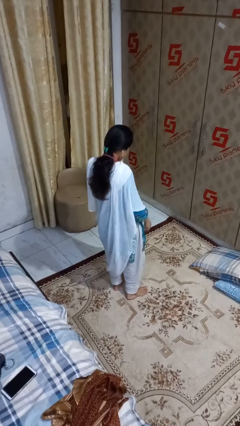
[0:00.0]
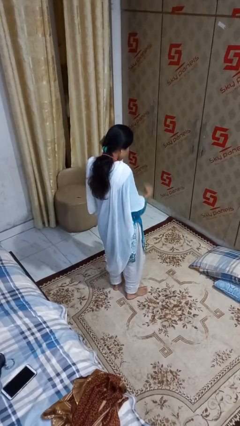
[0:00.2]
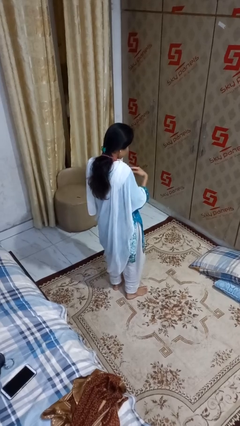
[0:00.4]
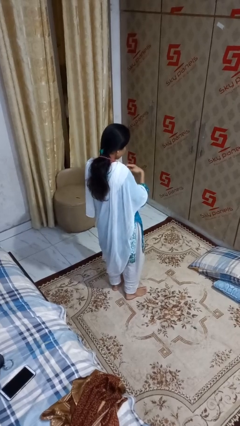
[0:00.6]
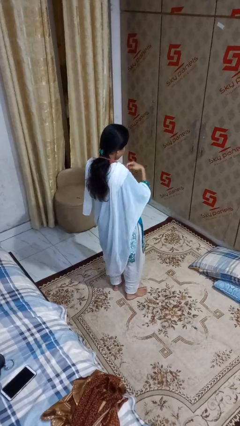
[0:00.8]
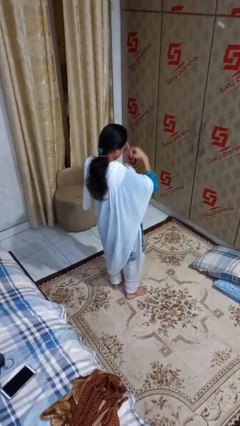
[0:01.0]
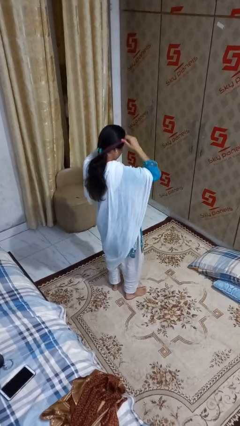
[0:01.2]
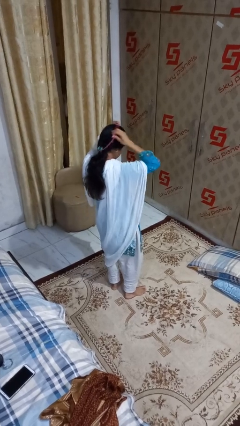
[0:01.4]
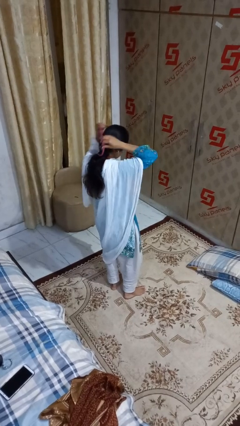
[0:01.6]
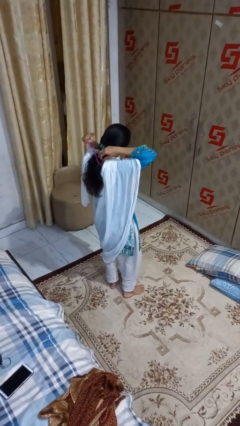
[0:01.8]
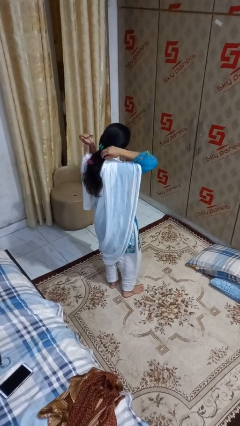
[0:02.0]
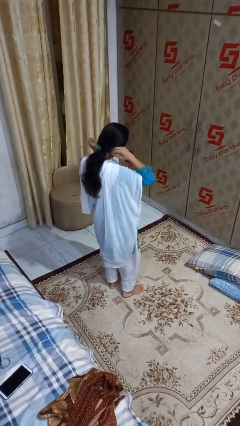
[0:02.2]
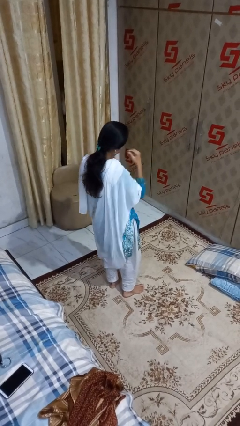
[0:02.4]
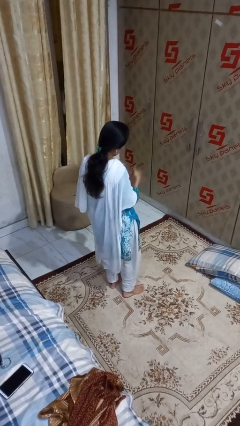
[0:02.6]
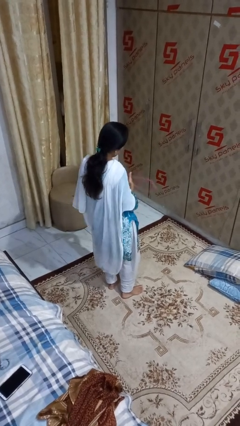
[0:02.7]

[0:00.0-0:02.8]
person takes off necklace

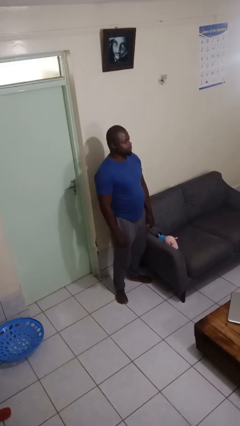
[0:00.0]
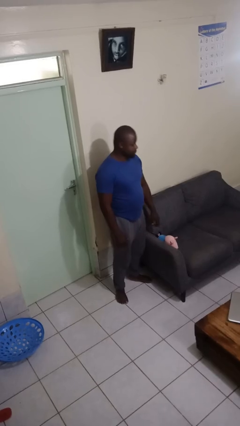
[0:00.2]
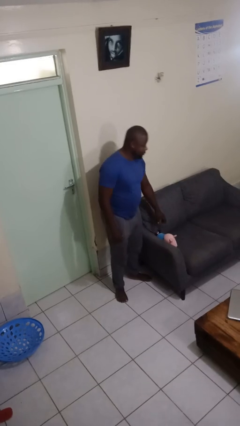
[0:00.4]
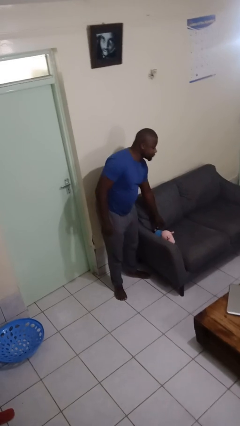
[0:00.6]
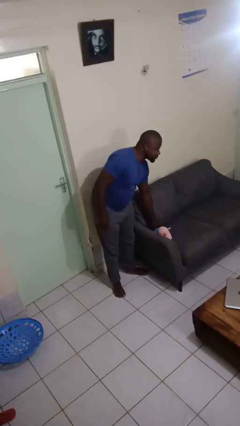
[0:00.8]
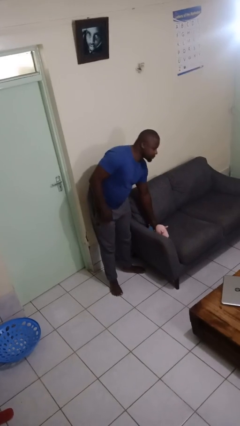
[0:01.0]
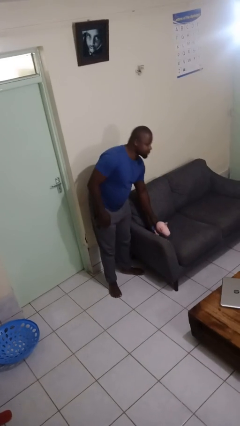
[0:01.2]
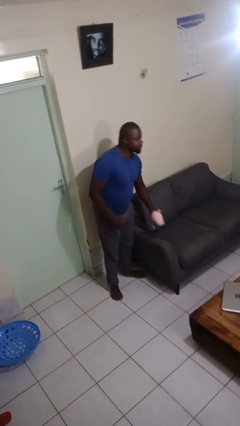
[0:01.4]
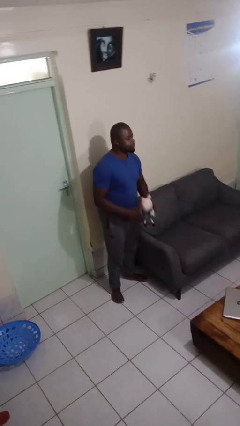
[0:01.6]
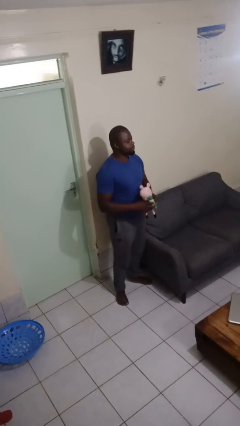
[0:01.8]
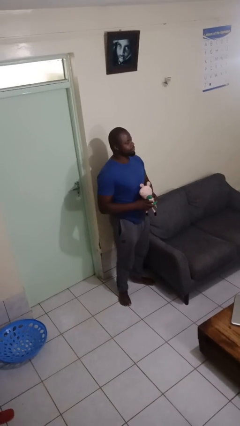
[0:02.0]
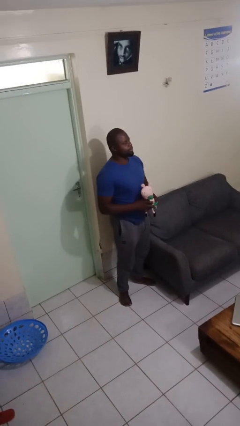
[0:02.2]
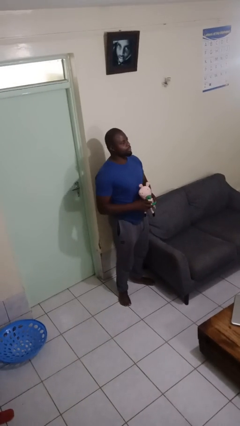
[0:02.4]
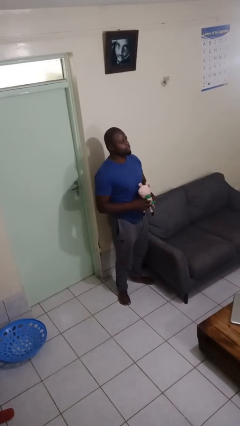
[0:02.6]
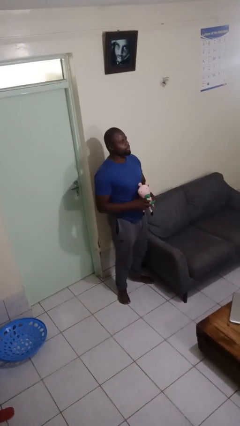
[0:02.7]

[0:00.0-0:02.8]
person picks up object from couch

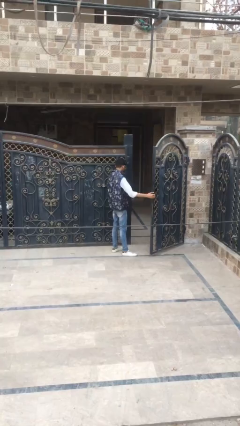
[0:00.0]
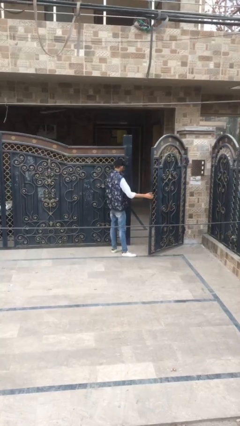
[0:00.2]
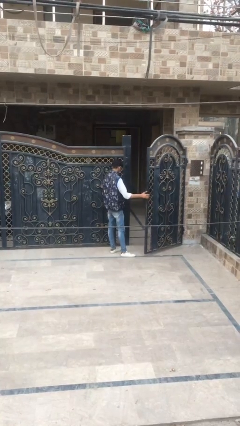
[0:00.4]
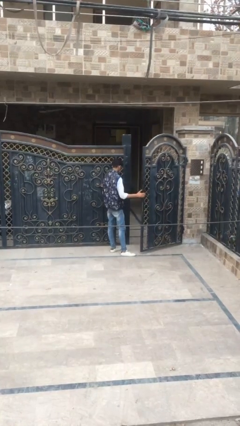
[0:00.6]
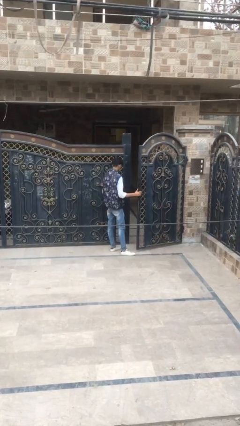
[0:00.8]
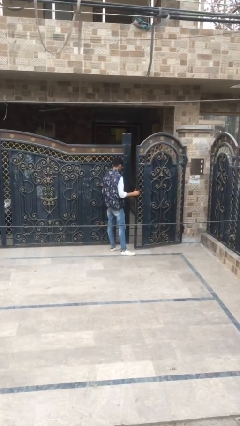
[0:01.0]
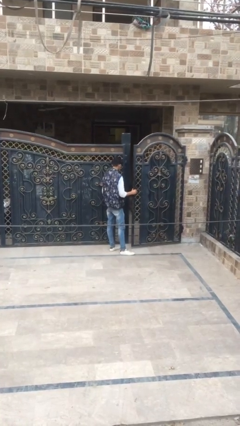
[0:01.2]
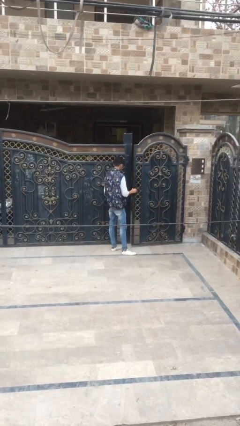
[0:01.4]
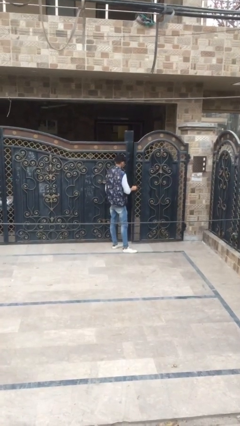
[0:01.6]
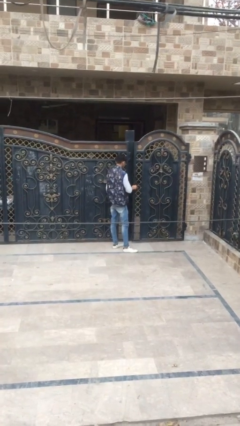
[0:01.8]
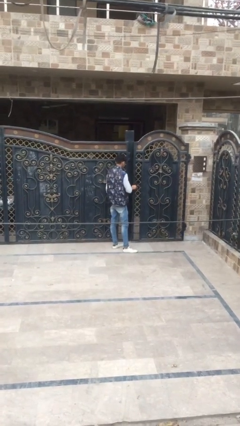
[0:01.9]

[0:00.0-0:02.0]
person closes facility door

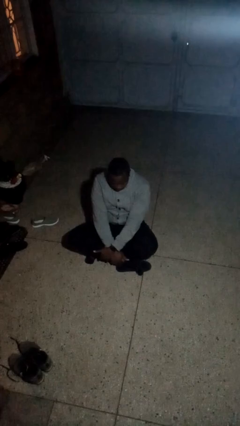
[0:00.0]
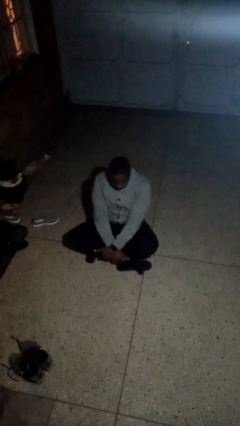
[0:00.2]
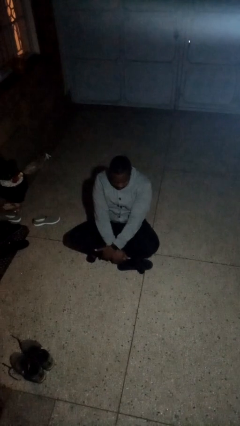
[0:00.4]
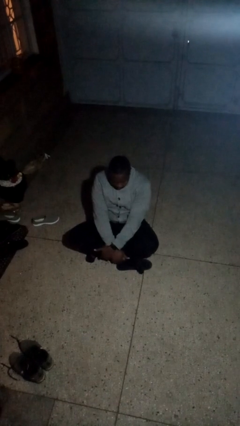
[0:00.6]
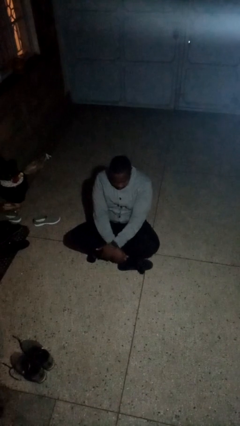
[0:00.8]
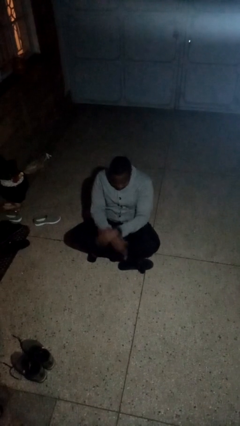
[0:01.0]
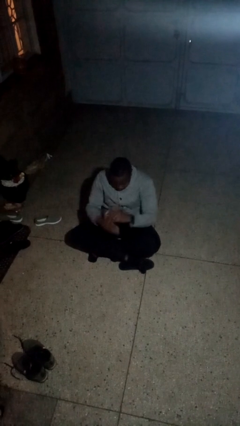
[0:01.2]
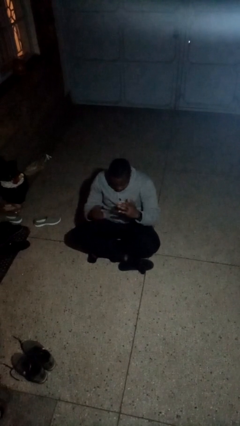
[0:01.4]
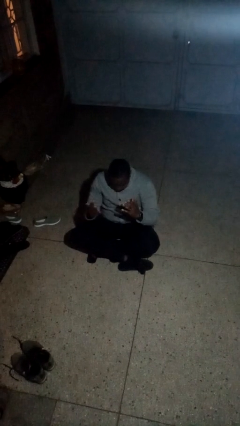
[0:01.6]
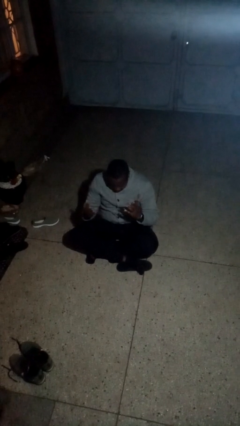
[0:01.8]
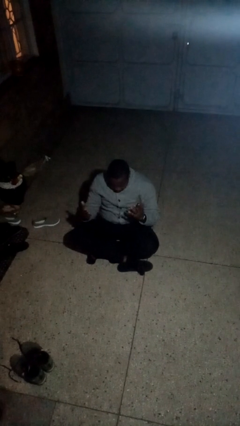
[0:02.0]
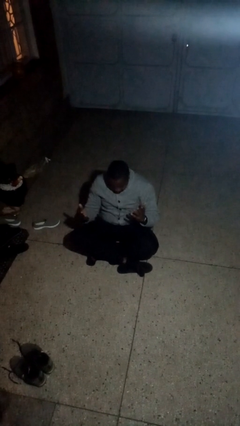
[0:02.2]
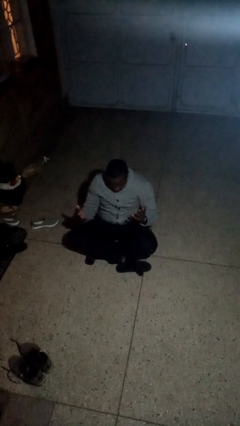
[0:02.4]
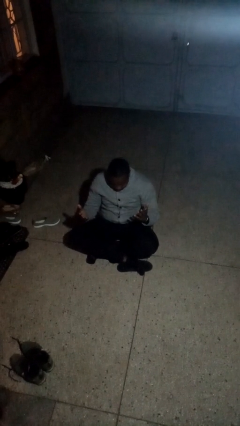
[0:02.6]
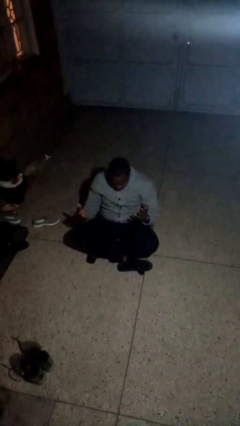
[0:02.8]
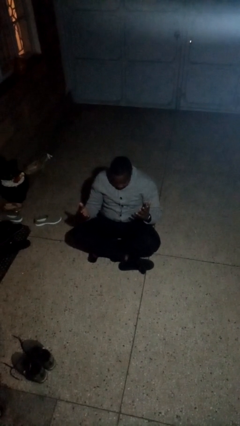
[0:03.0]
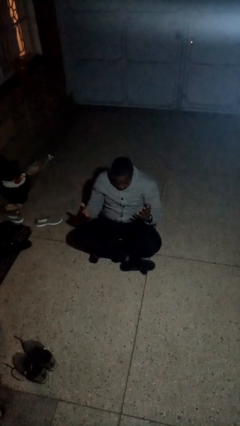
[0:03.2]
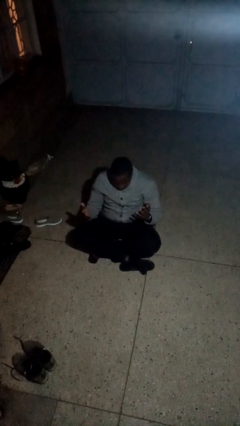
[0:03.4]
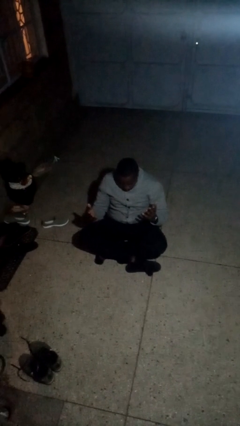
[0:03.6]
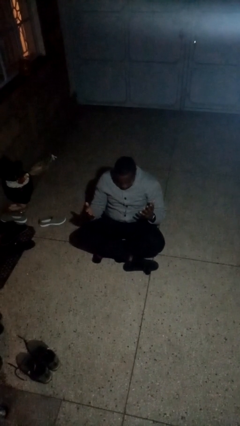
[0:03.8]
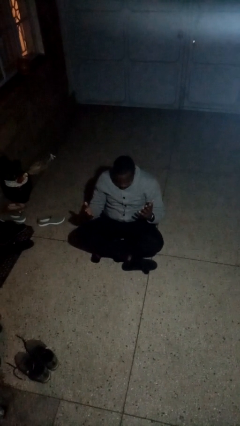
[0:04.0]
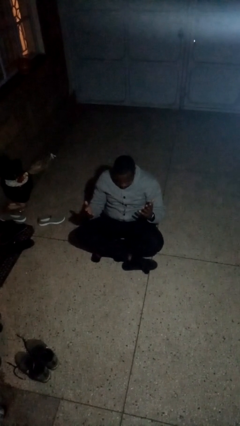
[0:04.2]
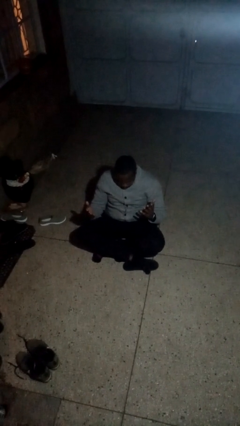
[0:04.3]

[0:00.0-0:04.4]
person prays

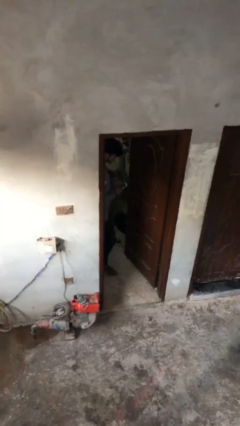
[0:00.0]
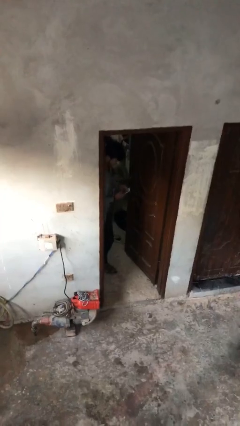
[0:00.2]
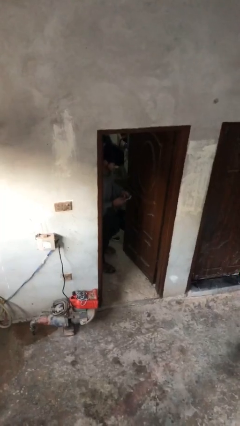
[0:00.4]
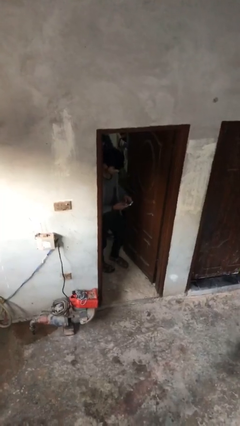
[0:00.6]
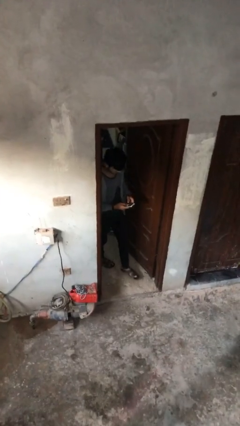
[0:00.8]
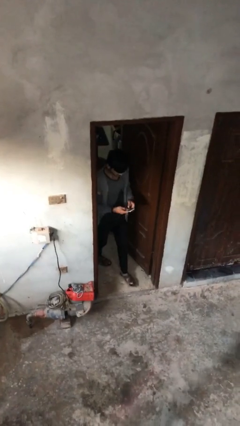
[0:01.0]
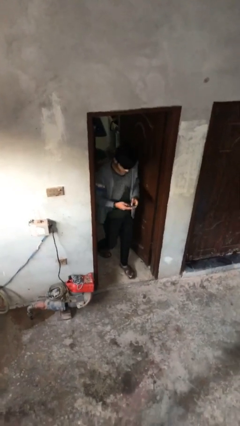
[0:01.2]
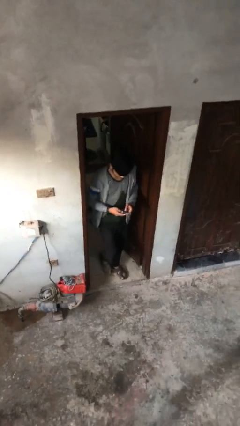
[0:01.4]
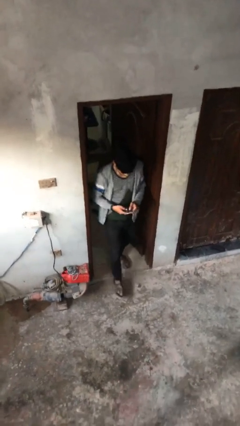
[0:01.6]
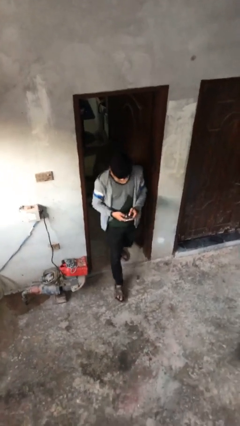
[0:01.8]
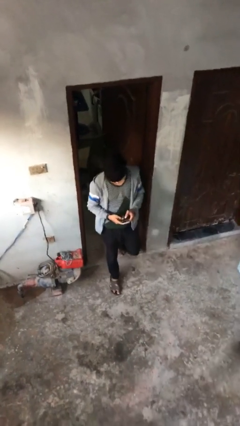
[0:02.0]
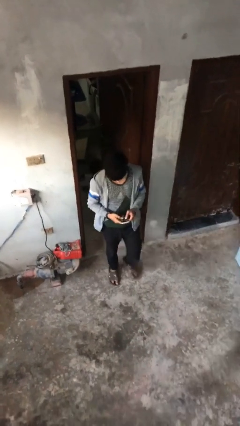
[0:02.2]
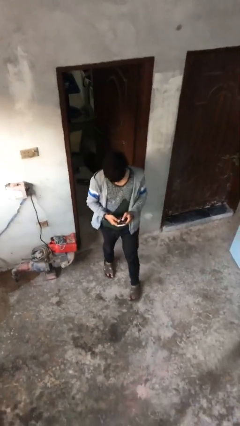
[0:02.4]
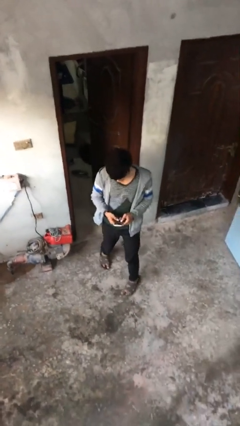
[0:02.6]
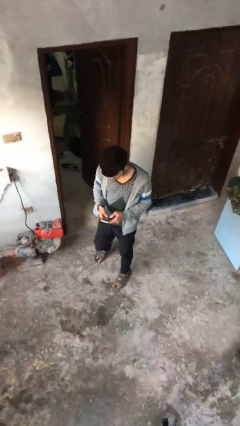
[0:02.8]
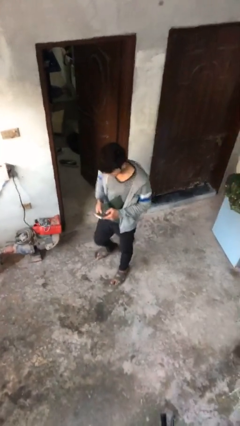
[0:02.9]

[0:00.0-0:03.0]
person exits scene through structure

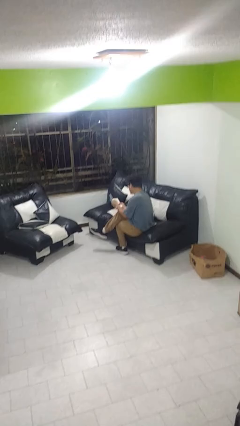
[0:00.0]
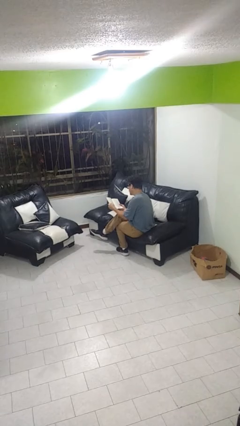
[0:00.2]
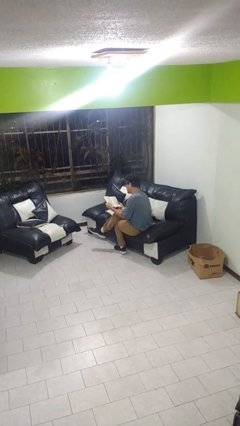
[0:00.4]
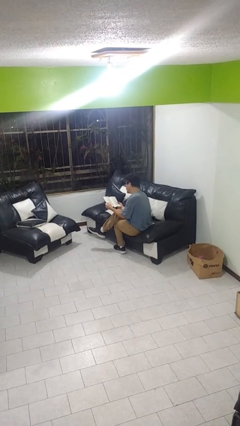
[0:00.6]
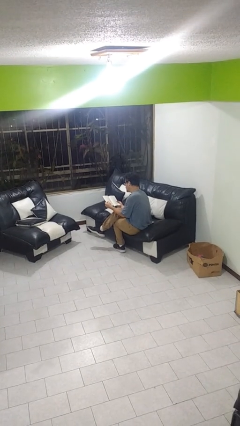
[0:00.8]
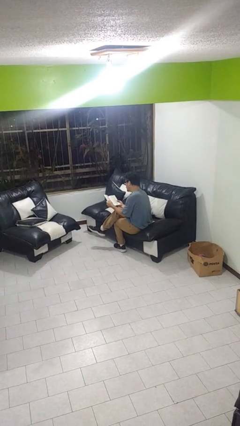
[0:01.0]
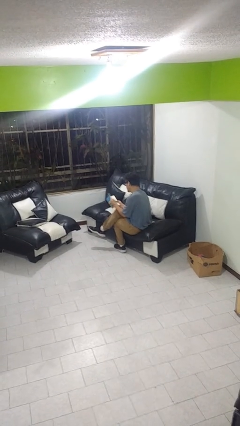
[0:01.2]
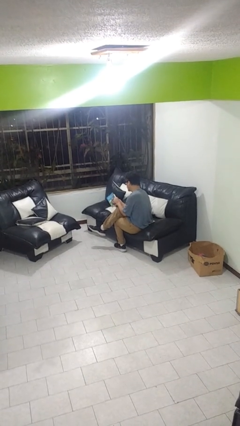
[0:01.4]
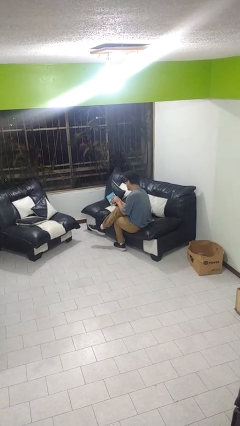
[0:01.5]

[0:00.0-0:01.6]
person reads book

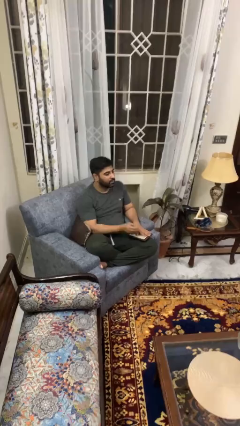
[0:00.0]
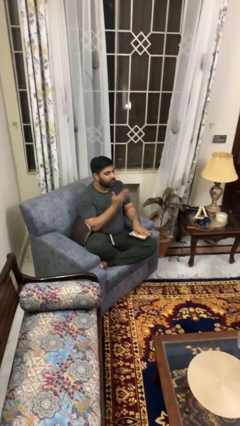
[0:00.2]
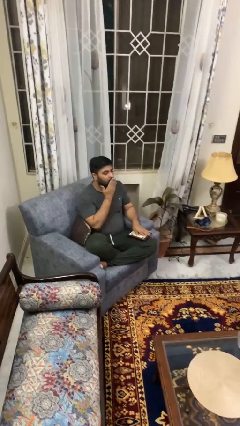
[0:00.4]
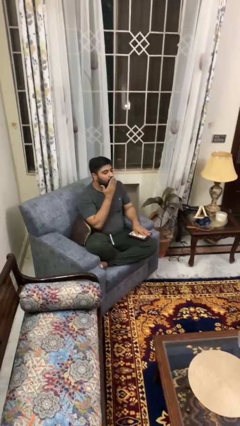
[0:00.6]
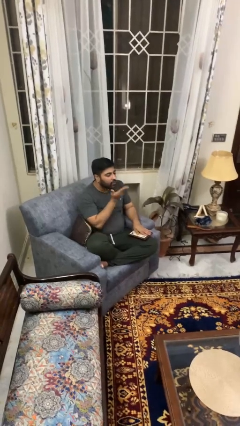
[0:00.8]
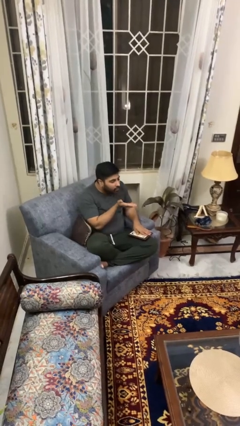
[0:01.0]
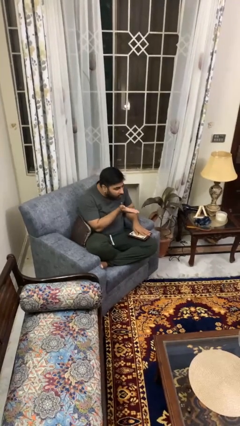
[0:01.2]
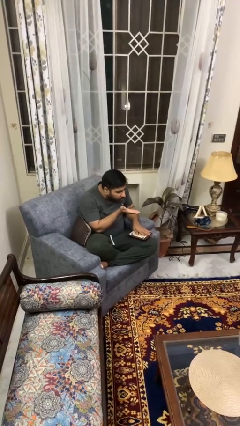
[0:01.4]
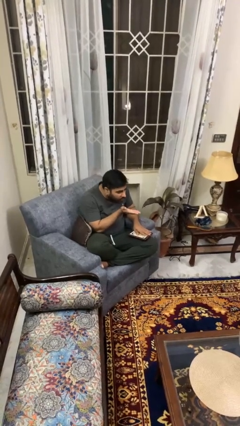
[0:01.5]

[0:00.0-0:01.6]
person gestures blow kiss
